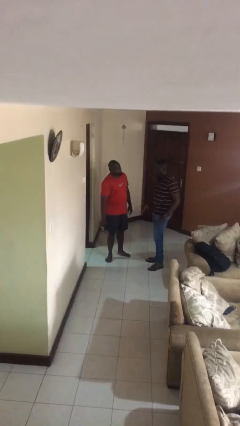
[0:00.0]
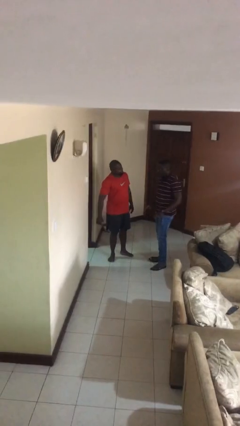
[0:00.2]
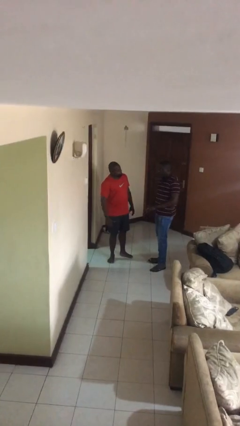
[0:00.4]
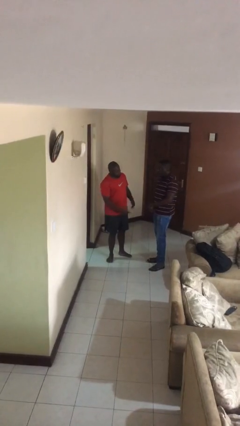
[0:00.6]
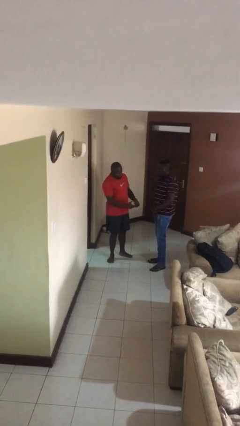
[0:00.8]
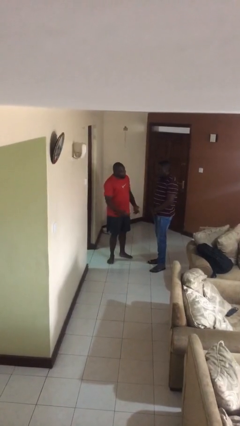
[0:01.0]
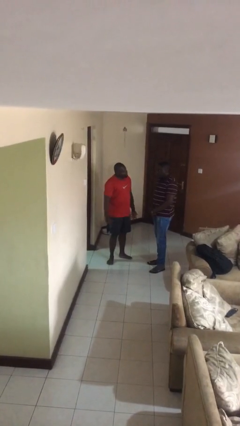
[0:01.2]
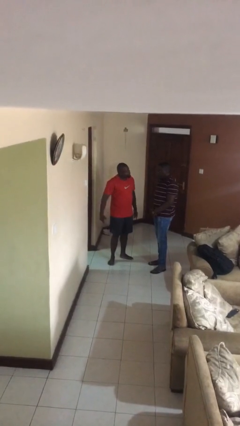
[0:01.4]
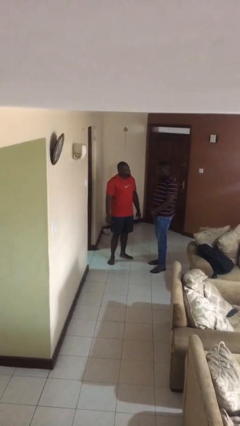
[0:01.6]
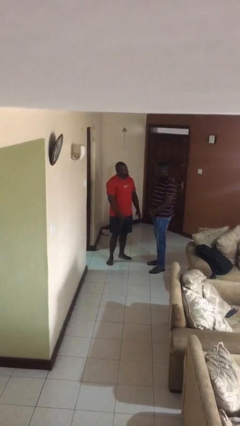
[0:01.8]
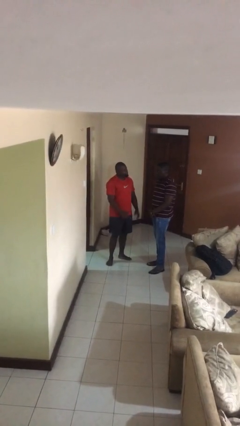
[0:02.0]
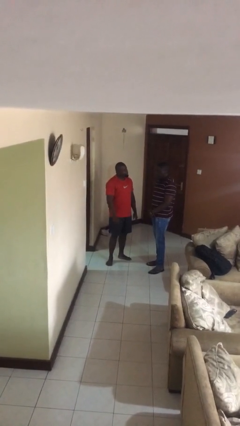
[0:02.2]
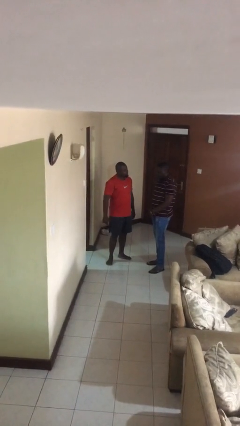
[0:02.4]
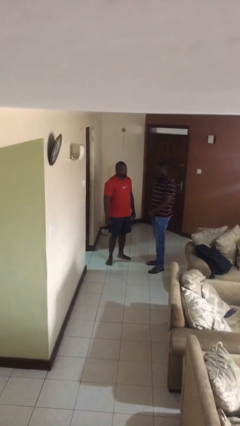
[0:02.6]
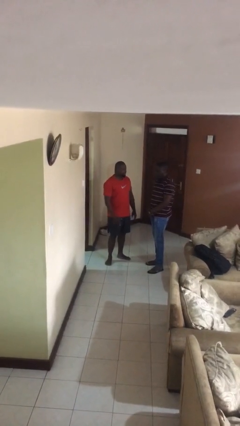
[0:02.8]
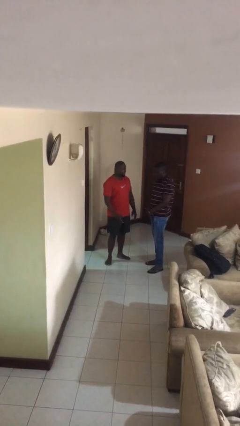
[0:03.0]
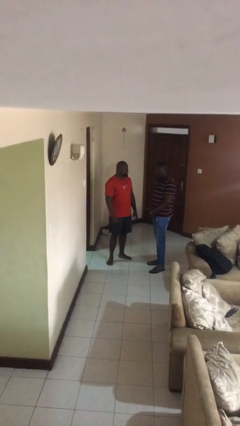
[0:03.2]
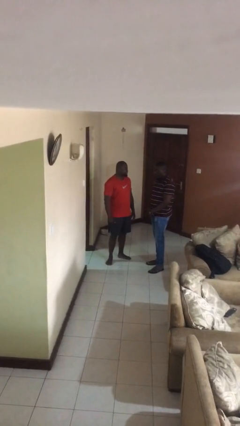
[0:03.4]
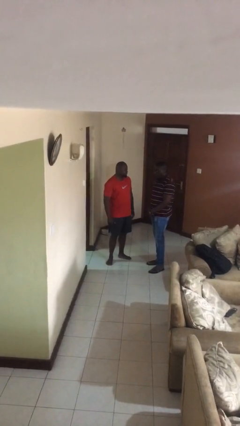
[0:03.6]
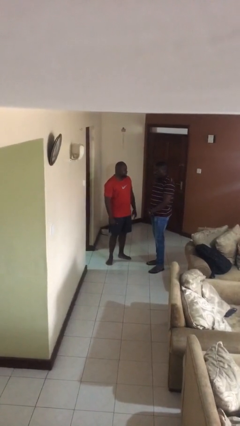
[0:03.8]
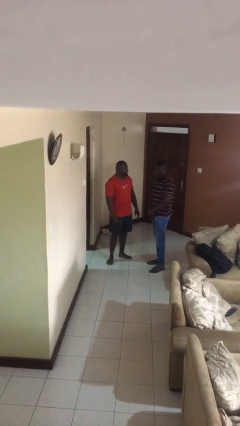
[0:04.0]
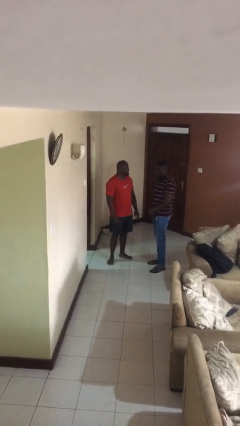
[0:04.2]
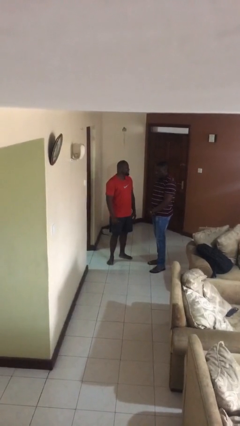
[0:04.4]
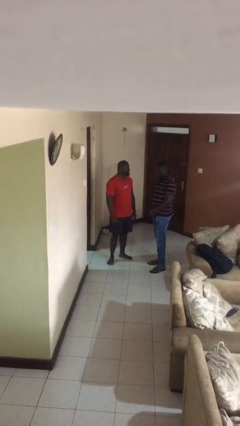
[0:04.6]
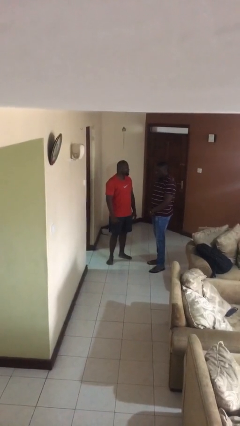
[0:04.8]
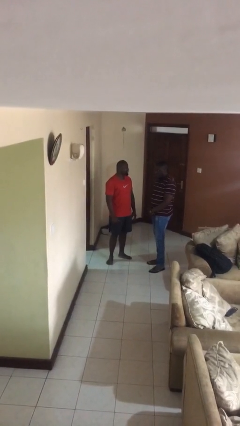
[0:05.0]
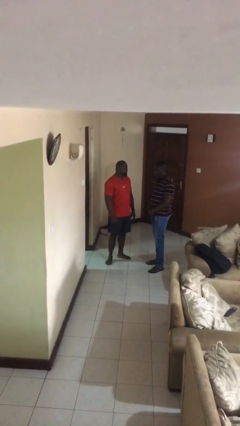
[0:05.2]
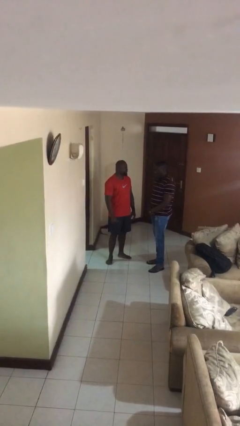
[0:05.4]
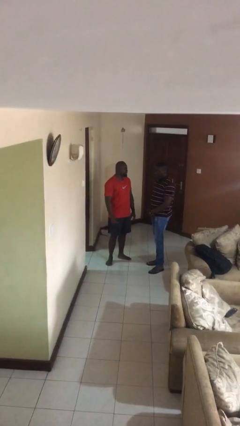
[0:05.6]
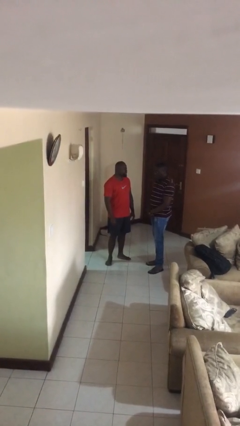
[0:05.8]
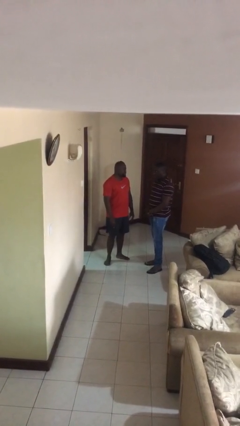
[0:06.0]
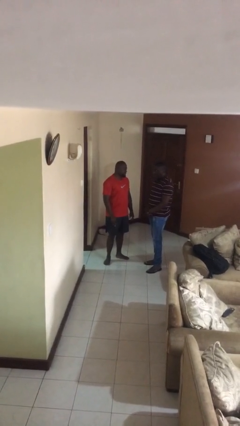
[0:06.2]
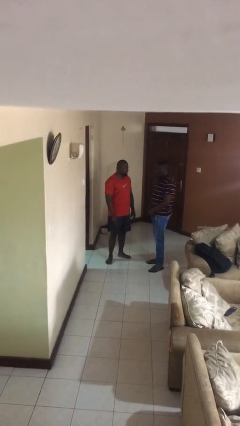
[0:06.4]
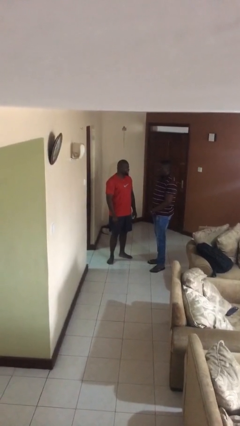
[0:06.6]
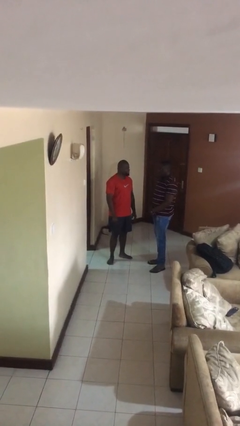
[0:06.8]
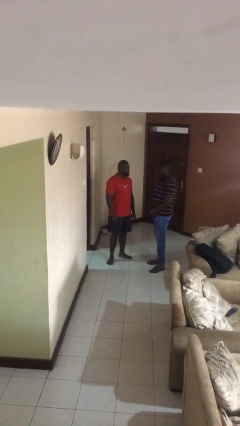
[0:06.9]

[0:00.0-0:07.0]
person talks to person

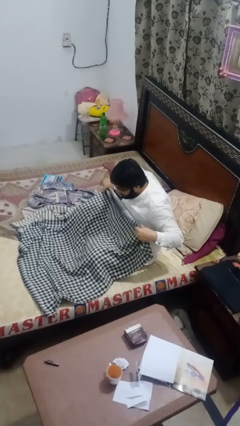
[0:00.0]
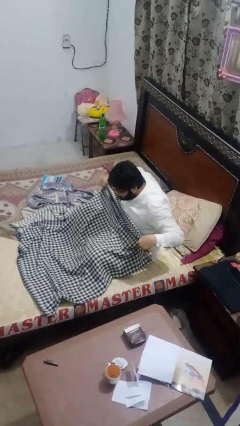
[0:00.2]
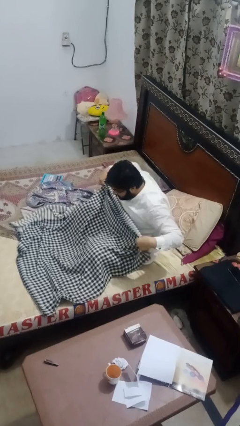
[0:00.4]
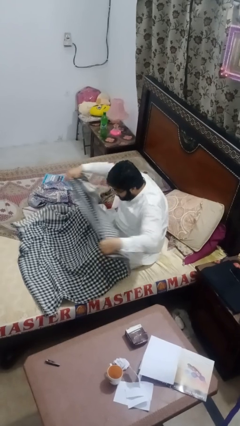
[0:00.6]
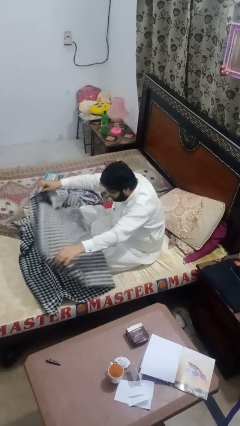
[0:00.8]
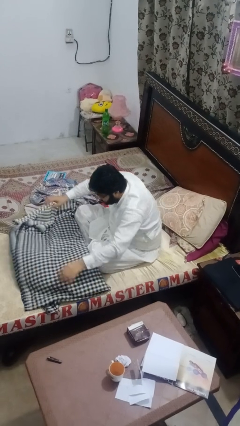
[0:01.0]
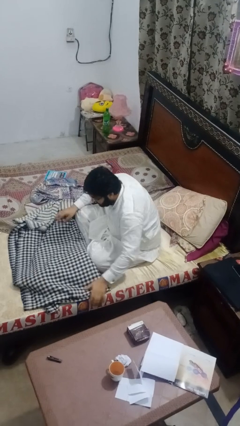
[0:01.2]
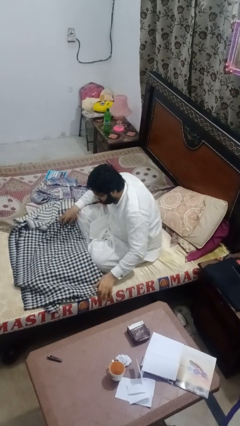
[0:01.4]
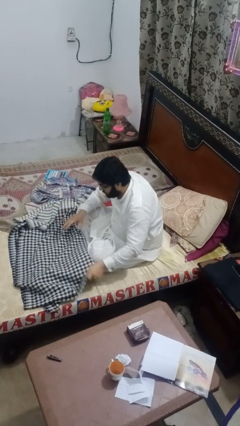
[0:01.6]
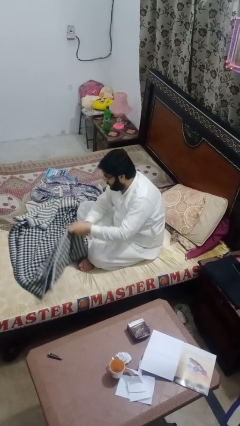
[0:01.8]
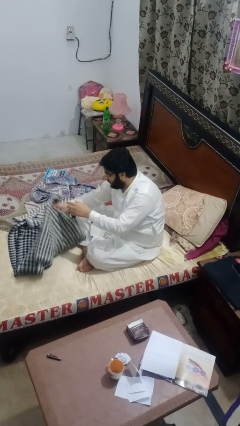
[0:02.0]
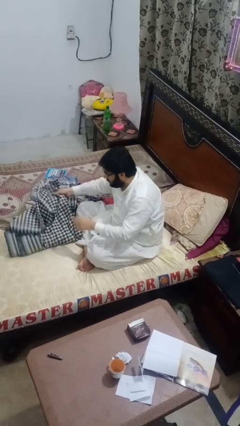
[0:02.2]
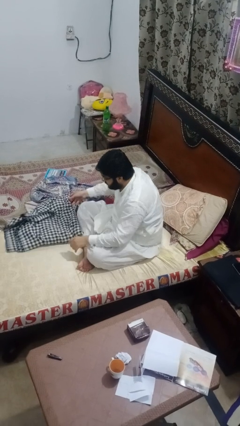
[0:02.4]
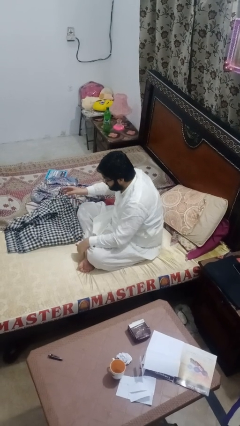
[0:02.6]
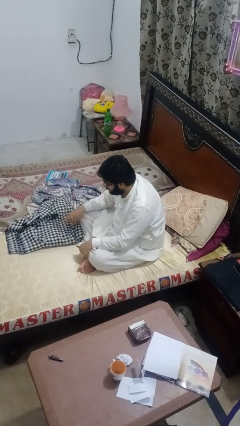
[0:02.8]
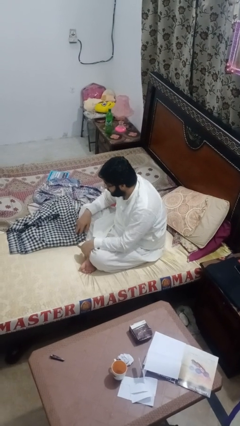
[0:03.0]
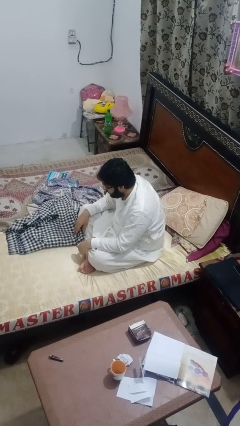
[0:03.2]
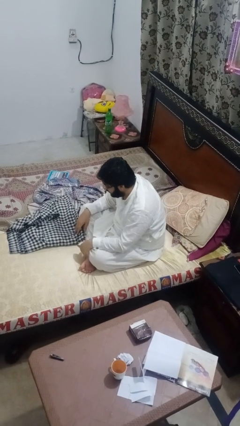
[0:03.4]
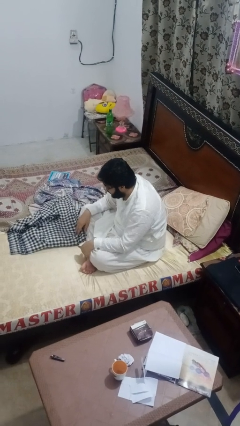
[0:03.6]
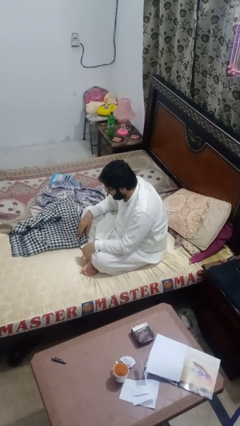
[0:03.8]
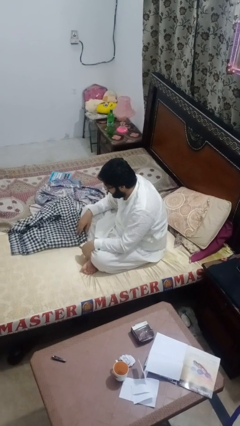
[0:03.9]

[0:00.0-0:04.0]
person folds blanket

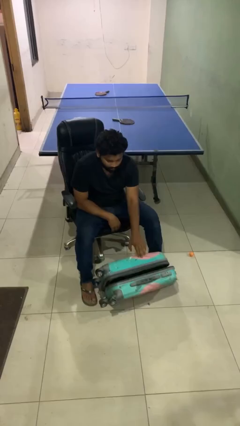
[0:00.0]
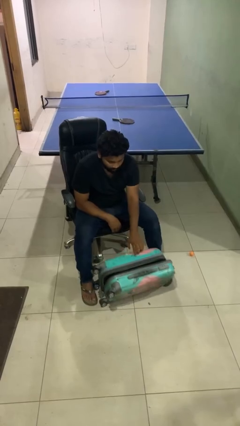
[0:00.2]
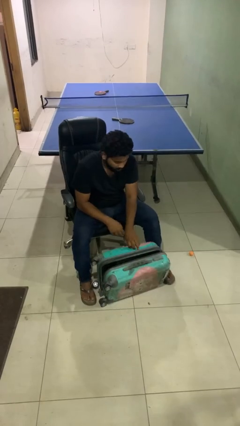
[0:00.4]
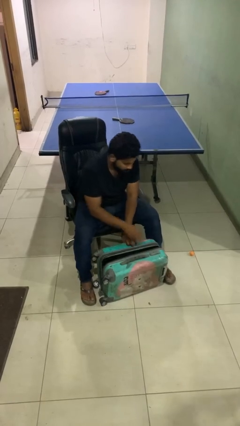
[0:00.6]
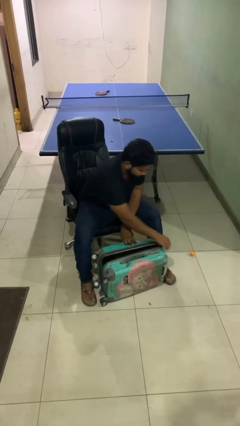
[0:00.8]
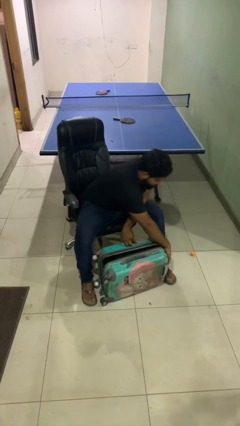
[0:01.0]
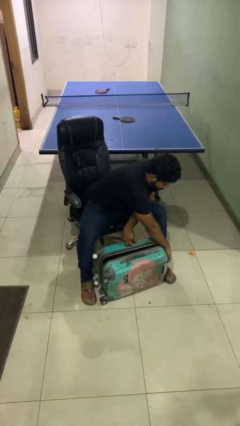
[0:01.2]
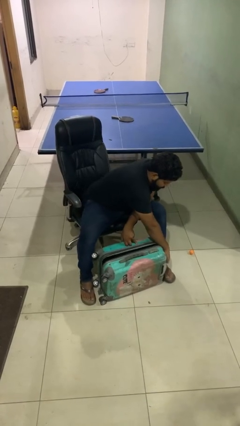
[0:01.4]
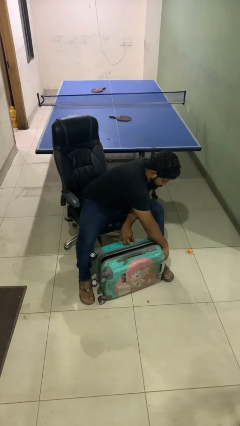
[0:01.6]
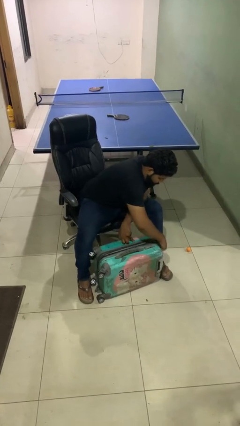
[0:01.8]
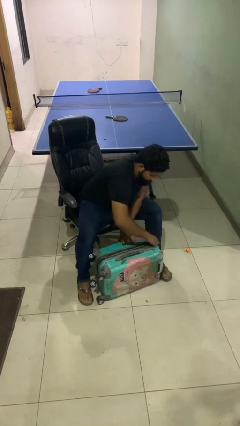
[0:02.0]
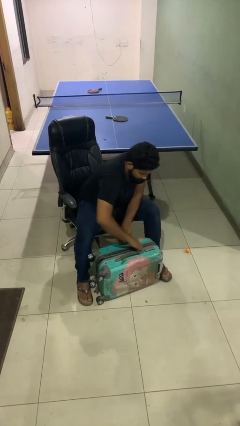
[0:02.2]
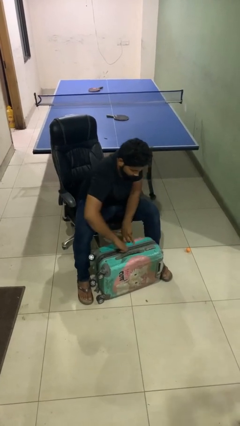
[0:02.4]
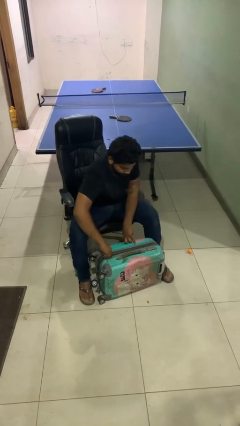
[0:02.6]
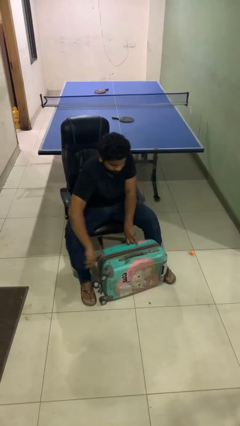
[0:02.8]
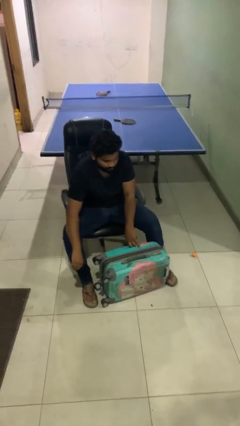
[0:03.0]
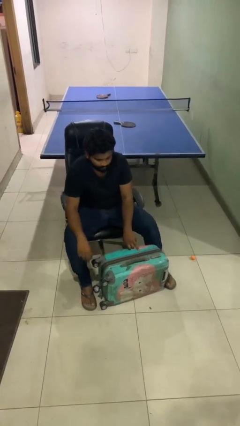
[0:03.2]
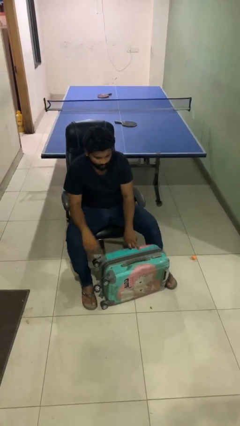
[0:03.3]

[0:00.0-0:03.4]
person closes suitcase

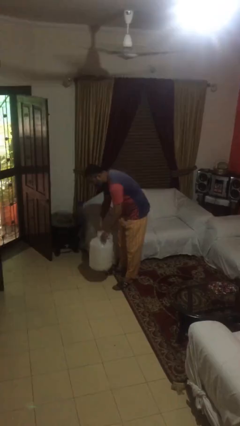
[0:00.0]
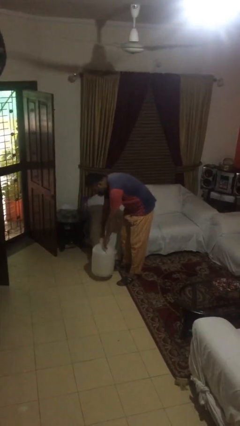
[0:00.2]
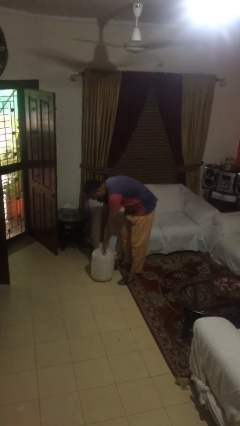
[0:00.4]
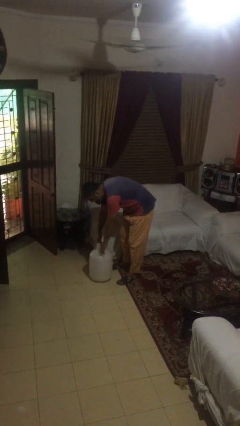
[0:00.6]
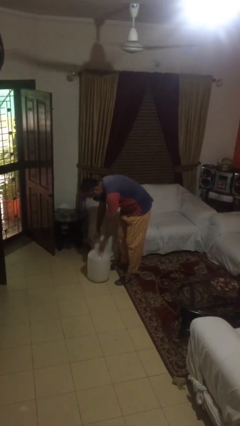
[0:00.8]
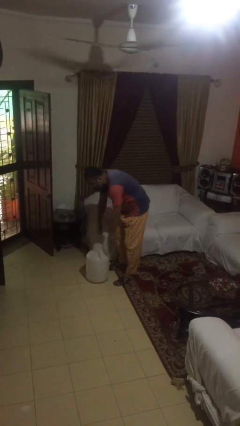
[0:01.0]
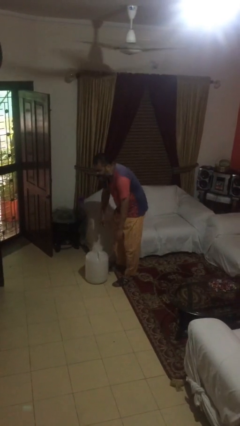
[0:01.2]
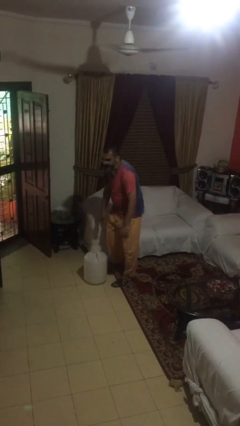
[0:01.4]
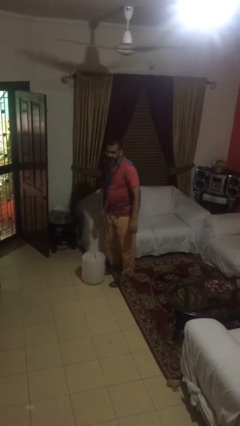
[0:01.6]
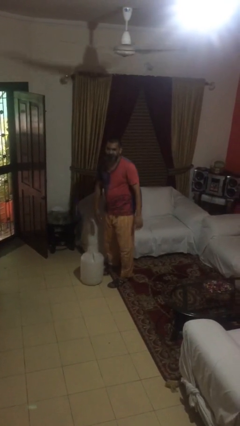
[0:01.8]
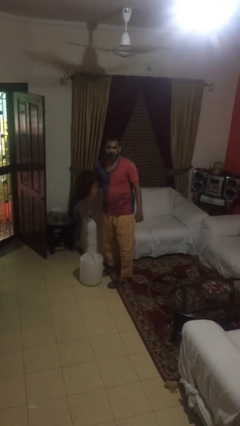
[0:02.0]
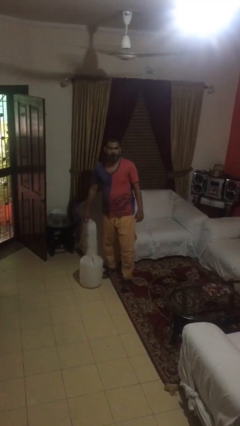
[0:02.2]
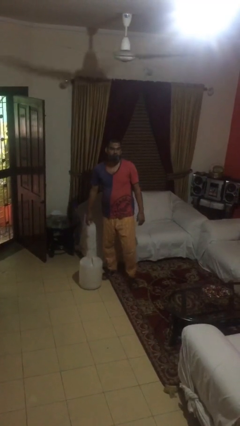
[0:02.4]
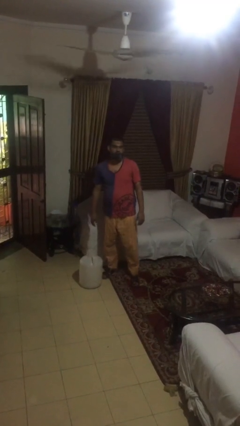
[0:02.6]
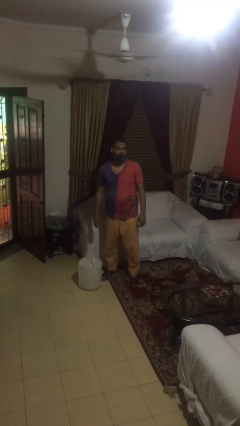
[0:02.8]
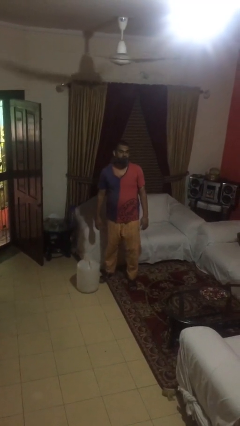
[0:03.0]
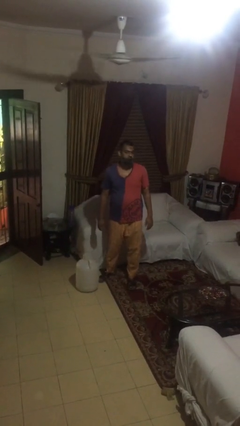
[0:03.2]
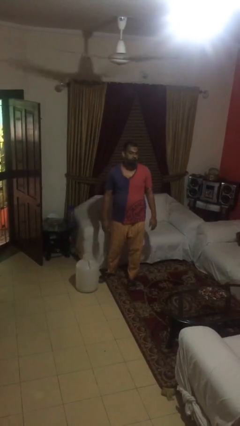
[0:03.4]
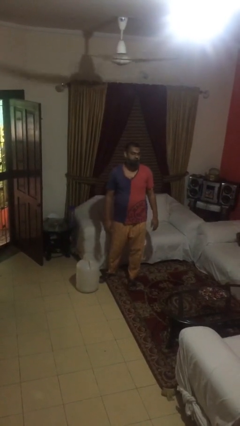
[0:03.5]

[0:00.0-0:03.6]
person puts down object on floor
